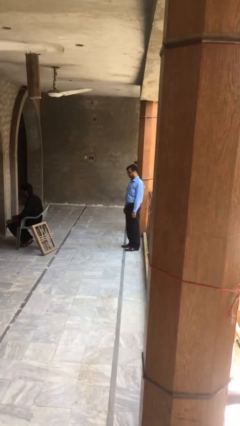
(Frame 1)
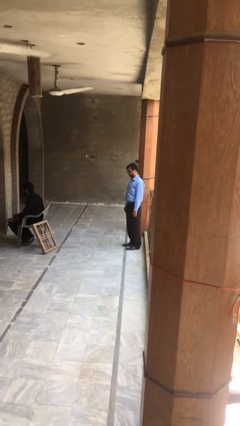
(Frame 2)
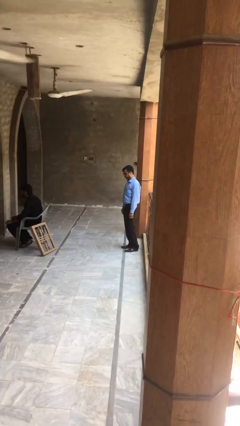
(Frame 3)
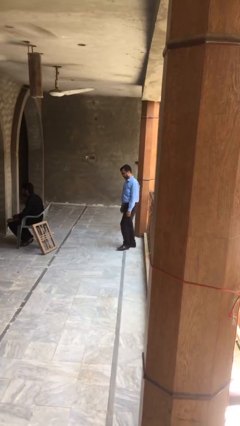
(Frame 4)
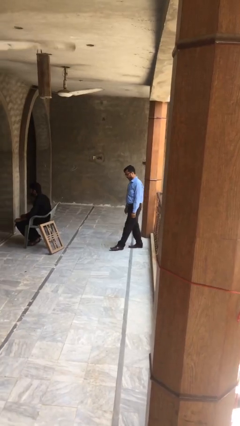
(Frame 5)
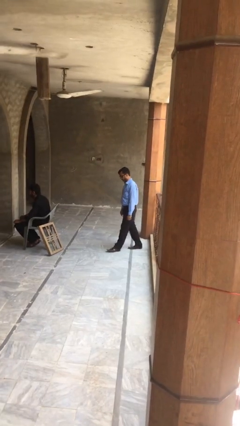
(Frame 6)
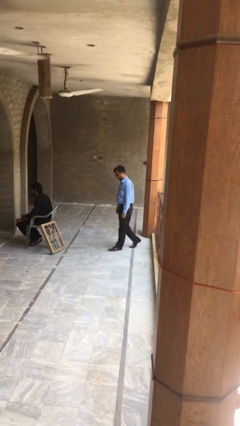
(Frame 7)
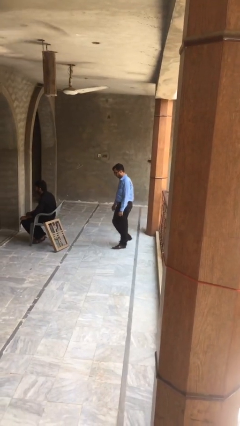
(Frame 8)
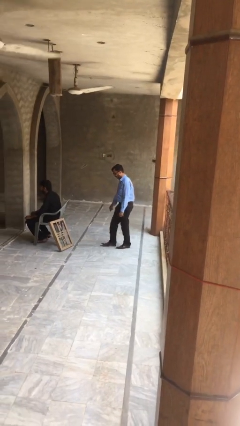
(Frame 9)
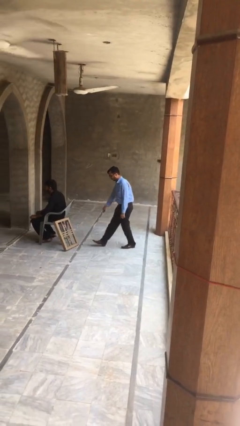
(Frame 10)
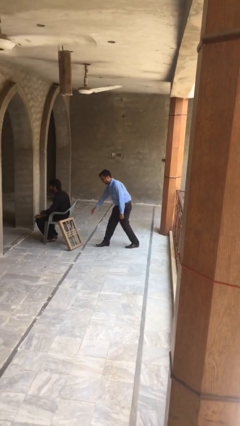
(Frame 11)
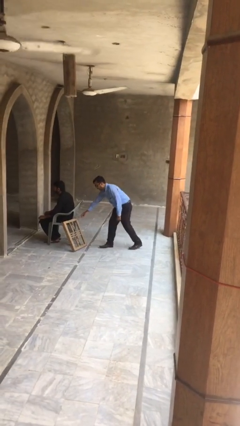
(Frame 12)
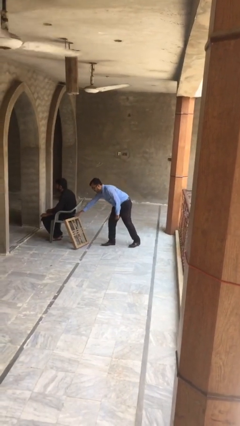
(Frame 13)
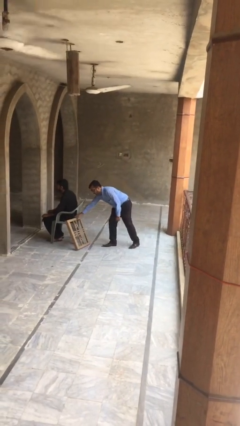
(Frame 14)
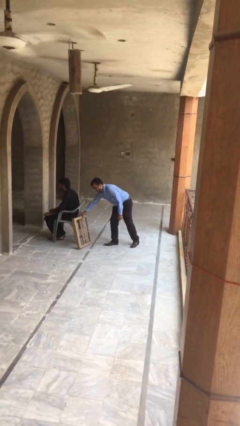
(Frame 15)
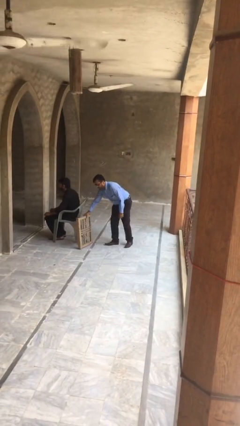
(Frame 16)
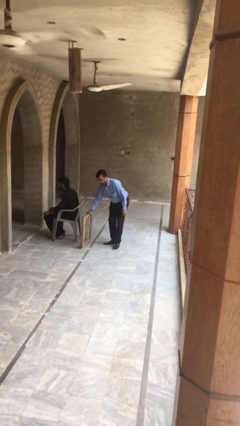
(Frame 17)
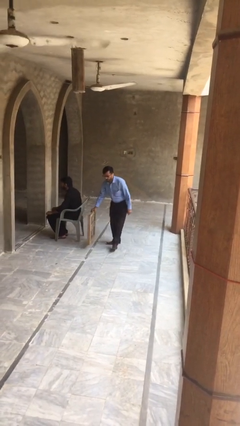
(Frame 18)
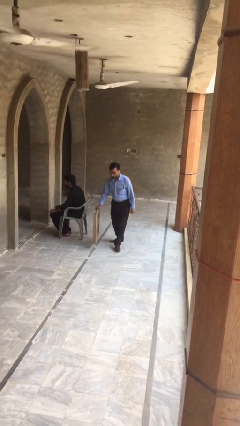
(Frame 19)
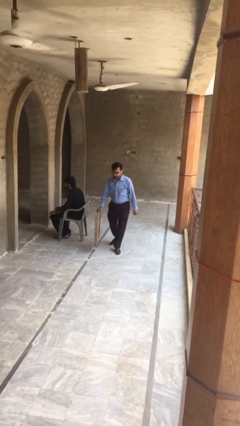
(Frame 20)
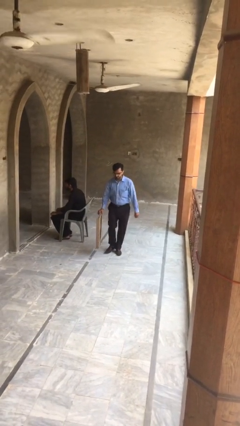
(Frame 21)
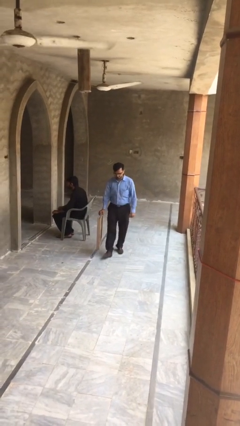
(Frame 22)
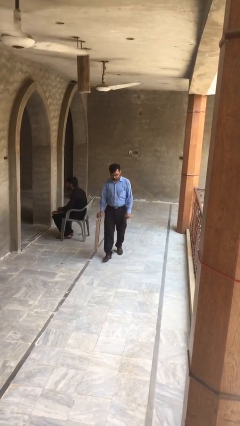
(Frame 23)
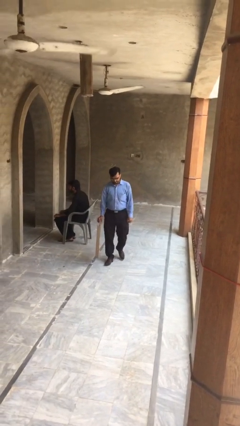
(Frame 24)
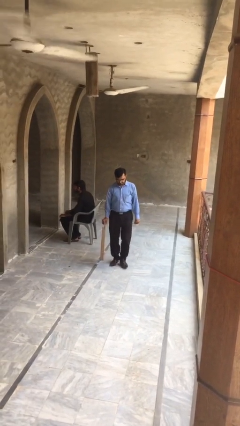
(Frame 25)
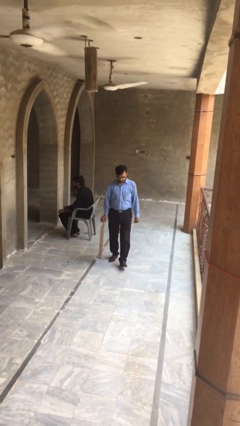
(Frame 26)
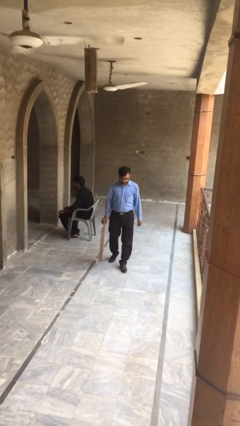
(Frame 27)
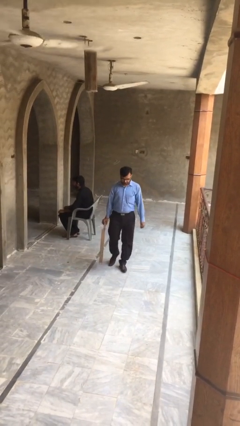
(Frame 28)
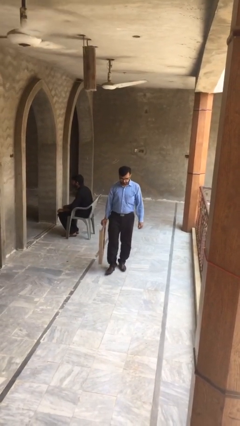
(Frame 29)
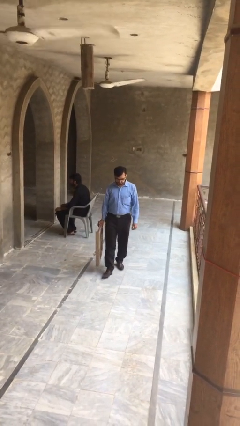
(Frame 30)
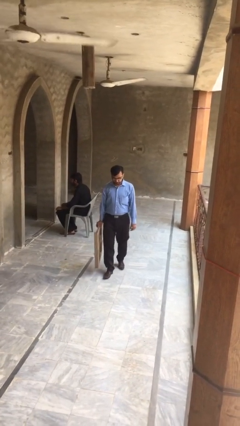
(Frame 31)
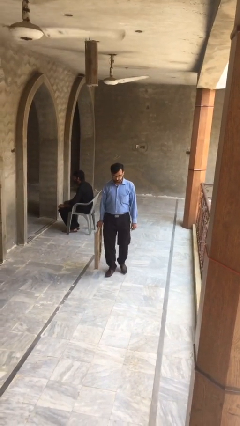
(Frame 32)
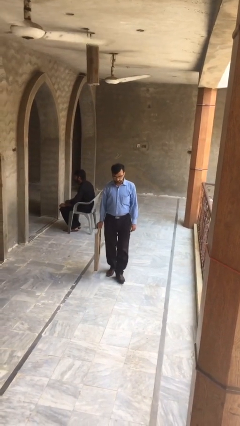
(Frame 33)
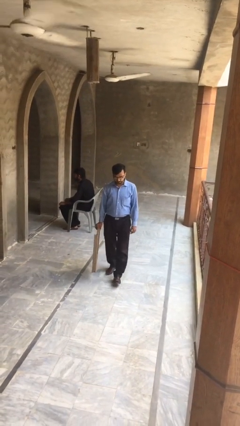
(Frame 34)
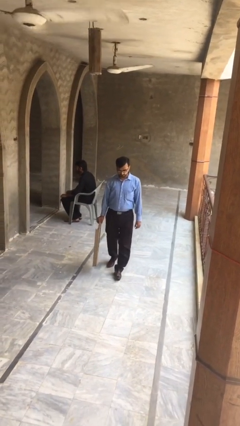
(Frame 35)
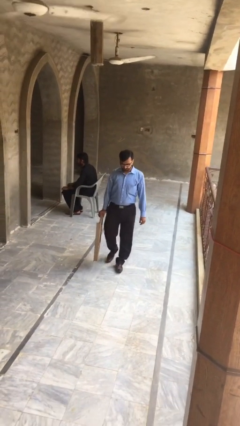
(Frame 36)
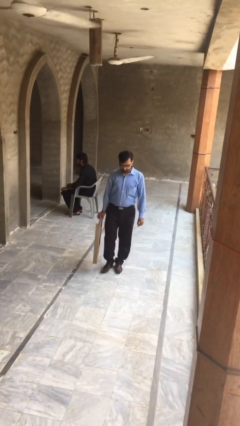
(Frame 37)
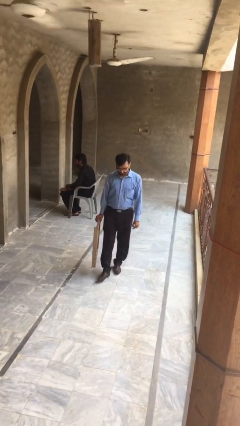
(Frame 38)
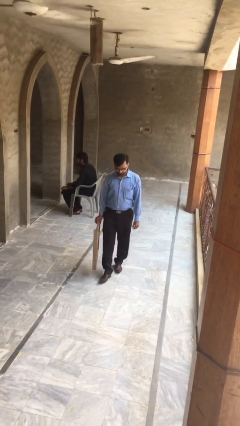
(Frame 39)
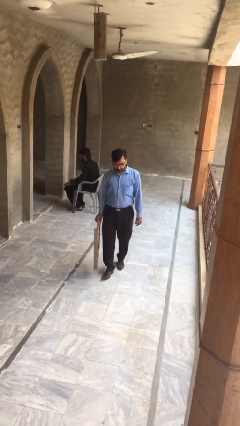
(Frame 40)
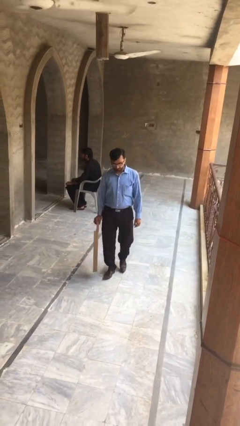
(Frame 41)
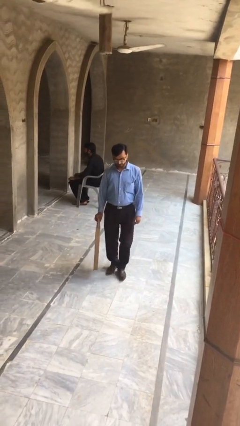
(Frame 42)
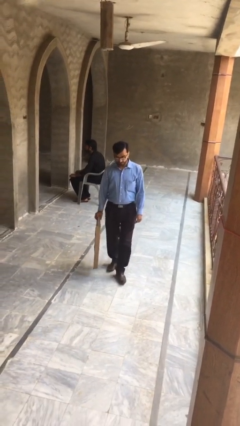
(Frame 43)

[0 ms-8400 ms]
person steals object from person

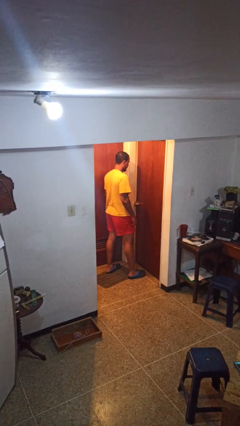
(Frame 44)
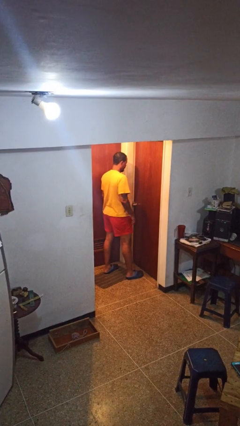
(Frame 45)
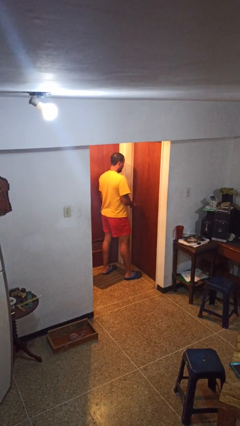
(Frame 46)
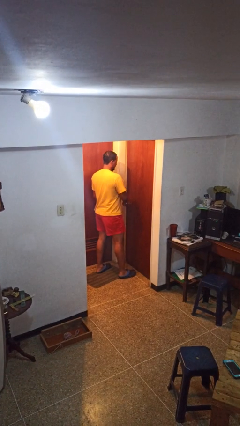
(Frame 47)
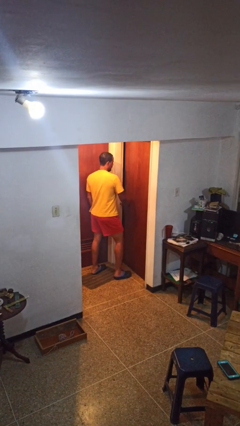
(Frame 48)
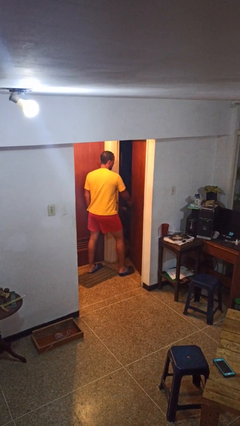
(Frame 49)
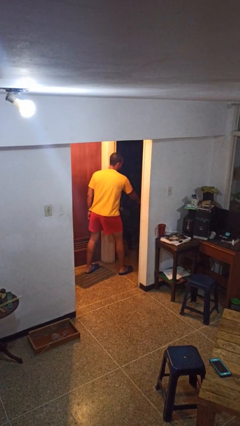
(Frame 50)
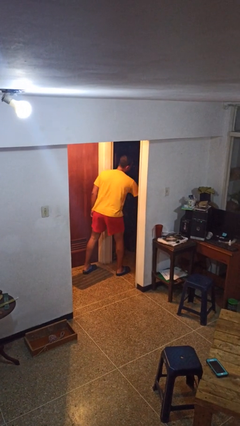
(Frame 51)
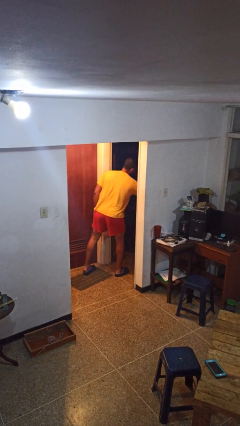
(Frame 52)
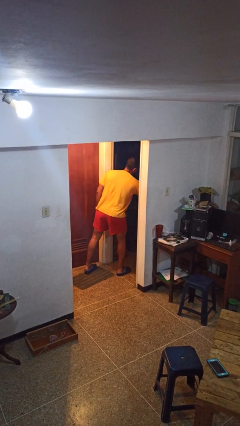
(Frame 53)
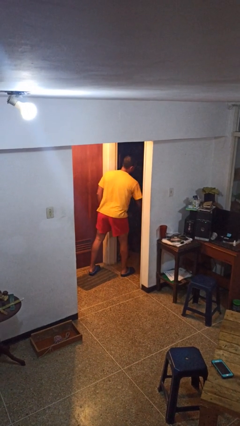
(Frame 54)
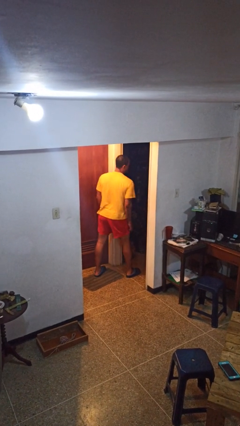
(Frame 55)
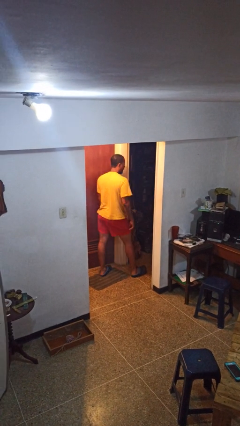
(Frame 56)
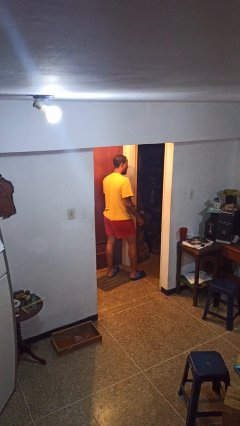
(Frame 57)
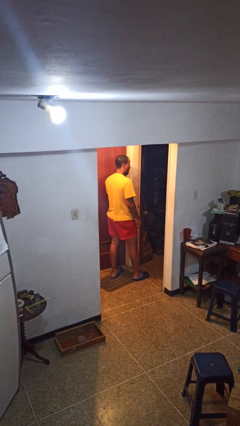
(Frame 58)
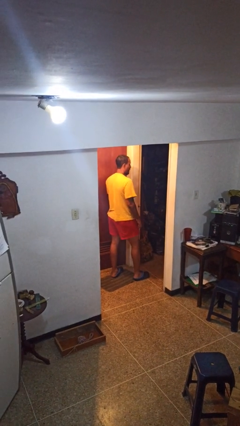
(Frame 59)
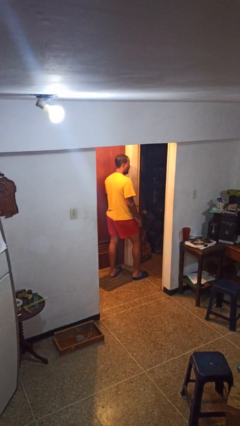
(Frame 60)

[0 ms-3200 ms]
person opens facility door

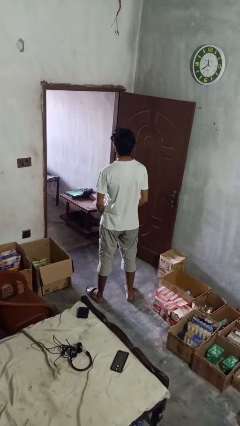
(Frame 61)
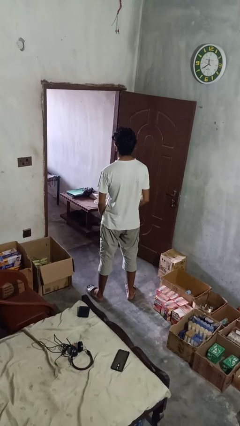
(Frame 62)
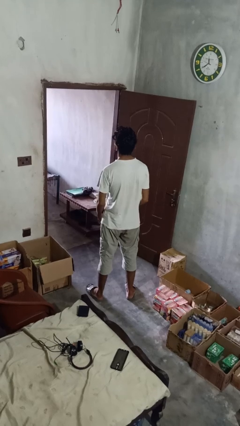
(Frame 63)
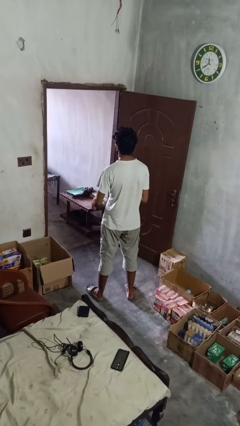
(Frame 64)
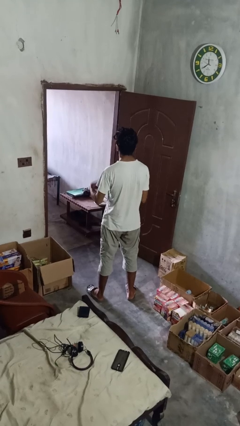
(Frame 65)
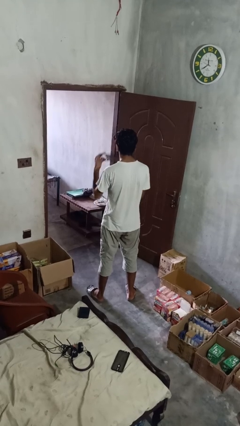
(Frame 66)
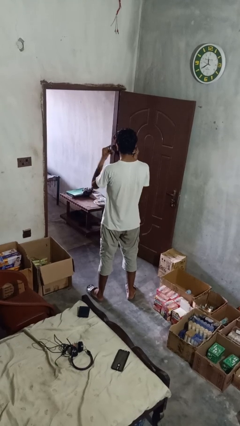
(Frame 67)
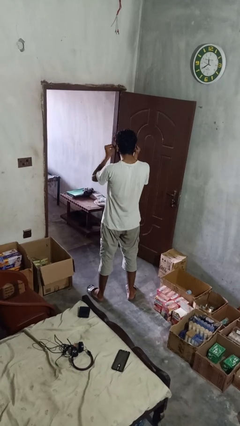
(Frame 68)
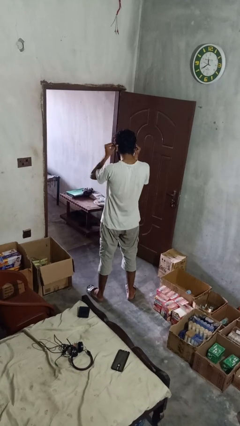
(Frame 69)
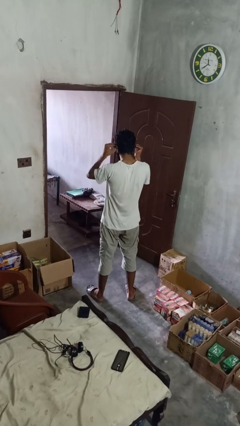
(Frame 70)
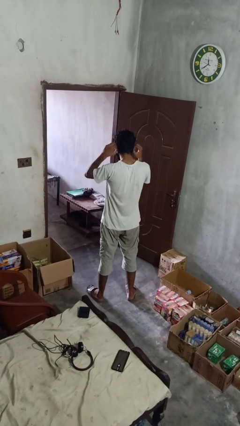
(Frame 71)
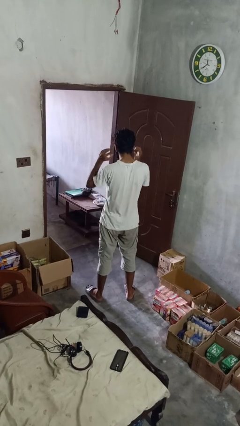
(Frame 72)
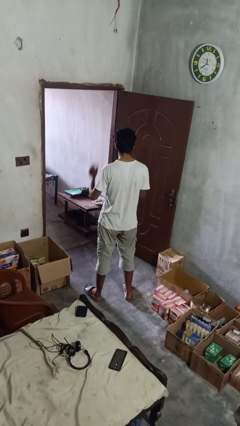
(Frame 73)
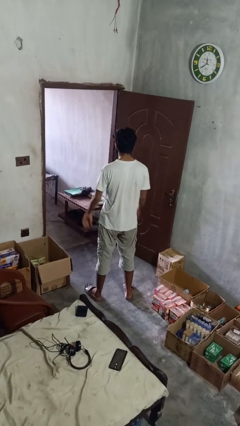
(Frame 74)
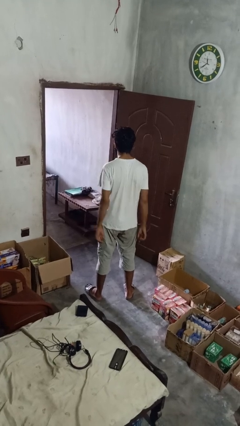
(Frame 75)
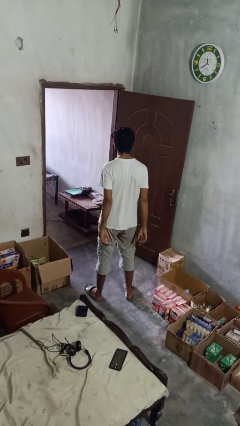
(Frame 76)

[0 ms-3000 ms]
person puts on facemask

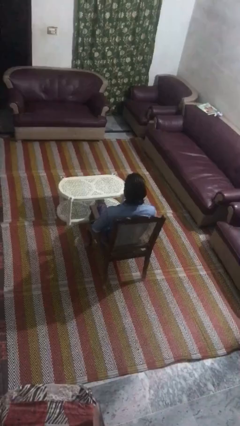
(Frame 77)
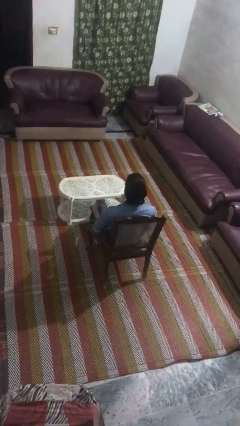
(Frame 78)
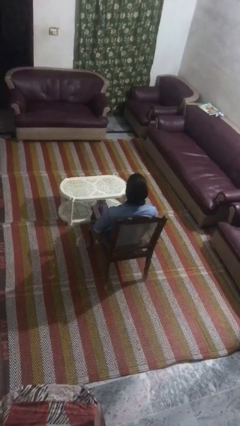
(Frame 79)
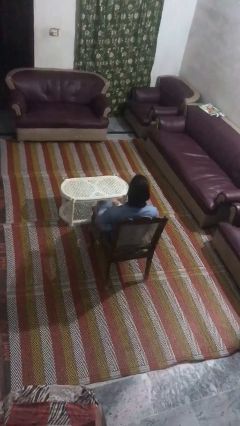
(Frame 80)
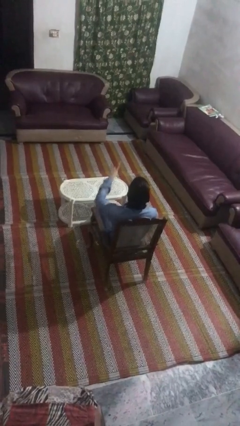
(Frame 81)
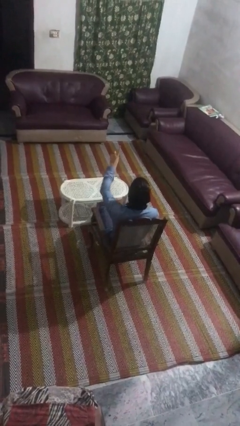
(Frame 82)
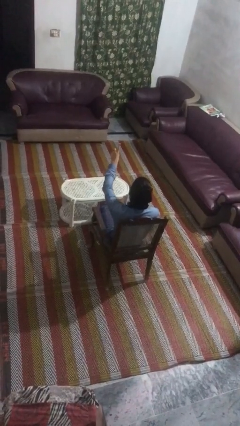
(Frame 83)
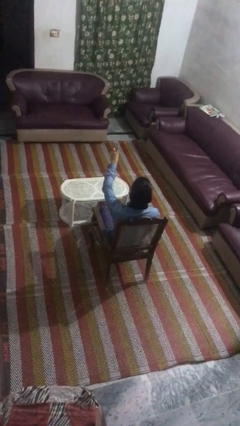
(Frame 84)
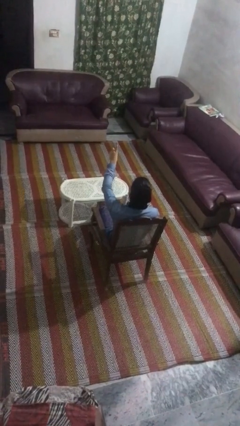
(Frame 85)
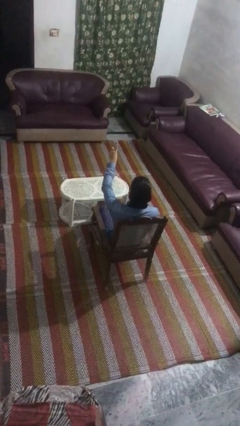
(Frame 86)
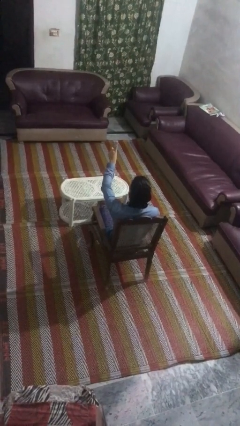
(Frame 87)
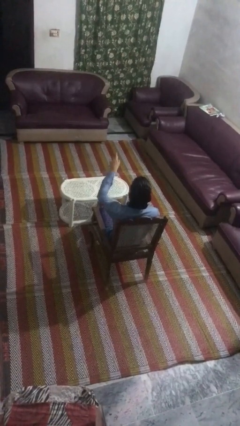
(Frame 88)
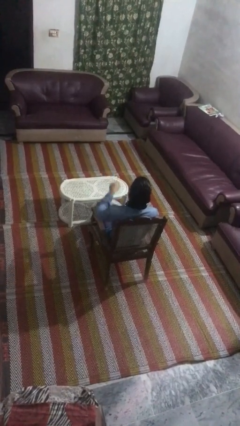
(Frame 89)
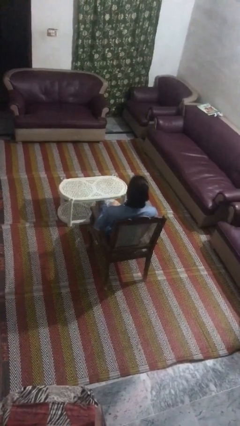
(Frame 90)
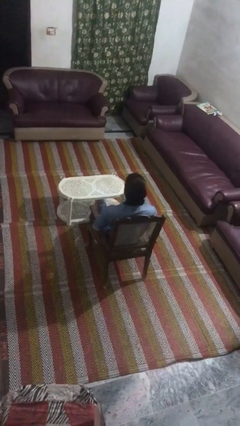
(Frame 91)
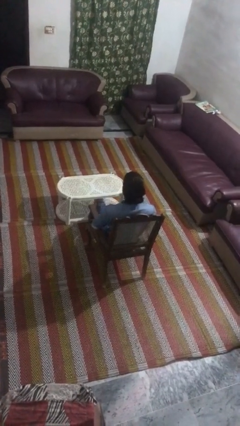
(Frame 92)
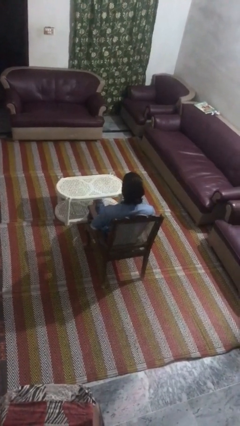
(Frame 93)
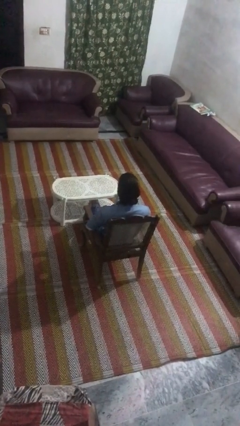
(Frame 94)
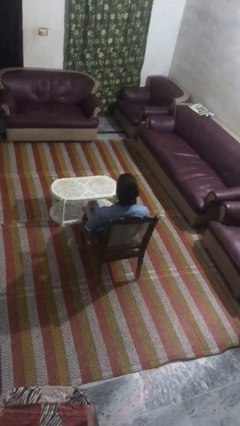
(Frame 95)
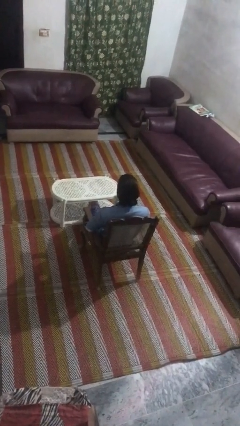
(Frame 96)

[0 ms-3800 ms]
person gestures number one
